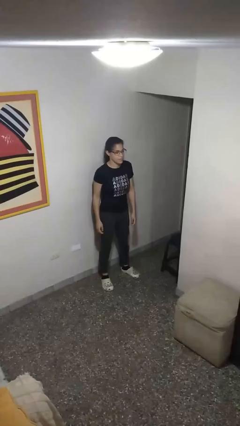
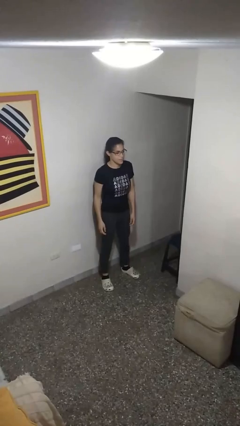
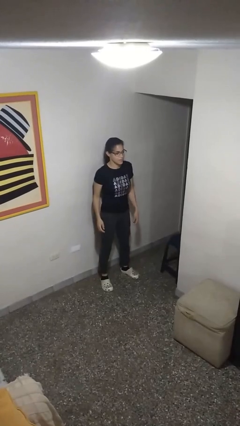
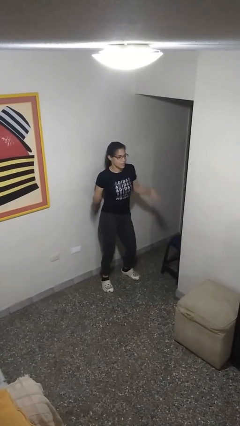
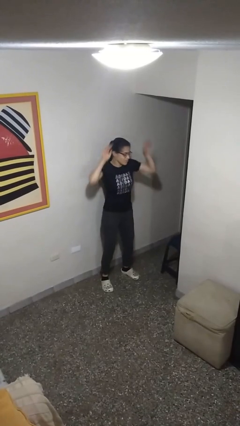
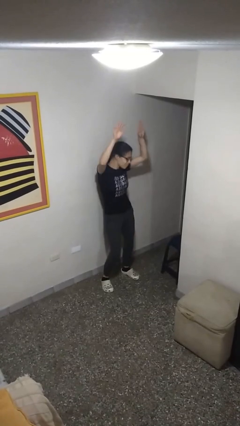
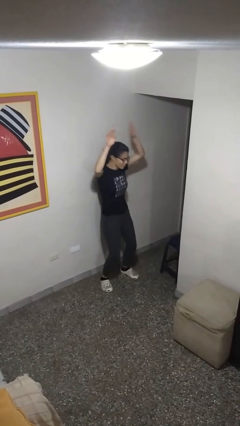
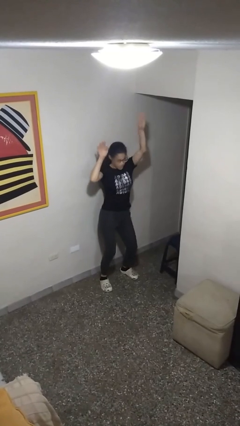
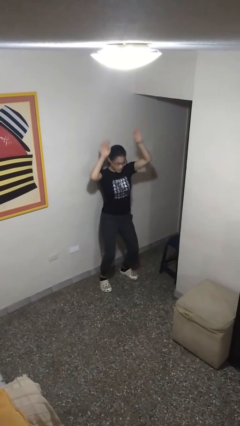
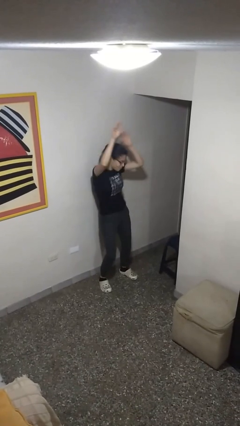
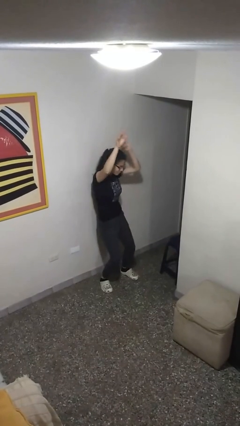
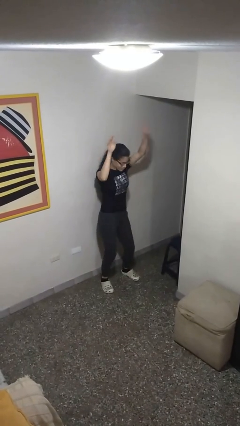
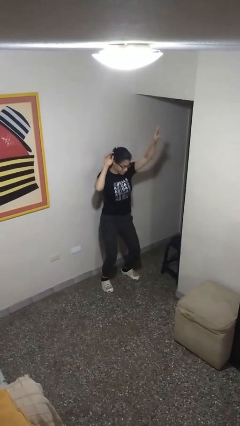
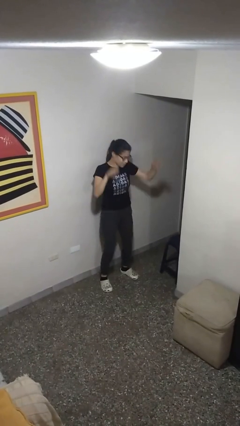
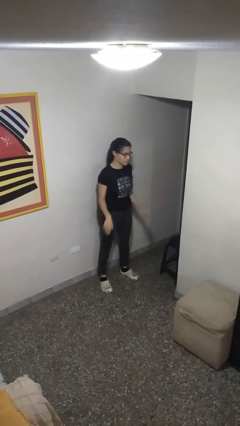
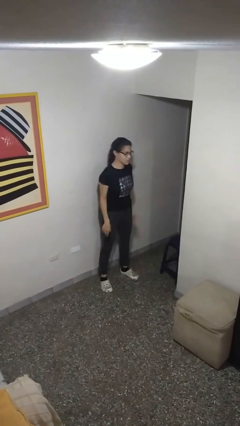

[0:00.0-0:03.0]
person dances in place

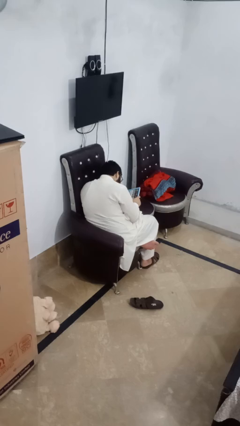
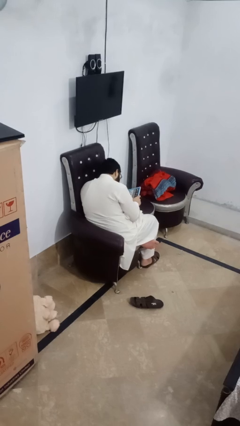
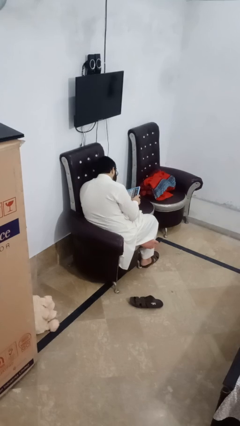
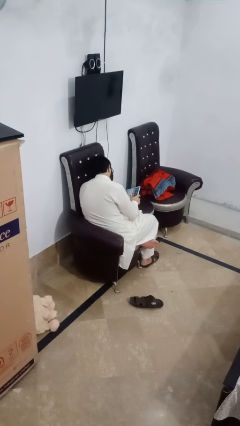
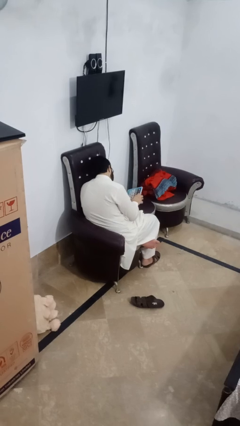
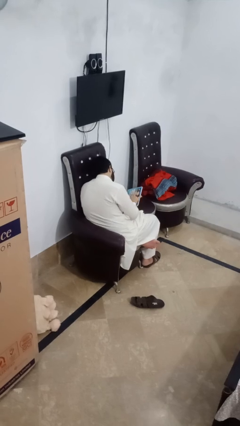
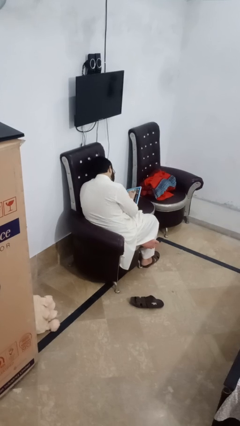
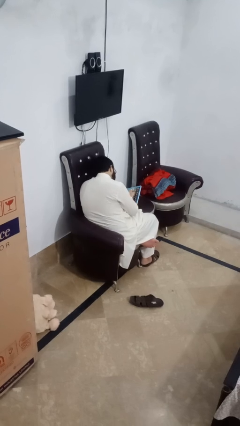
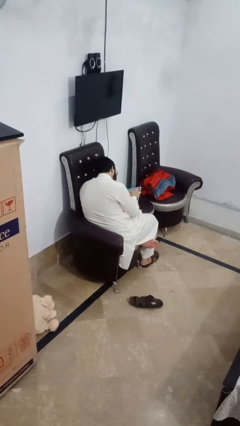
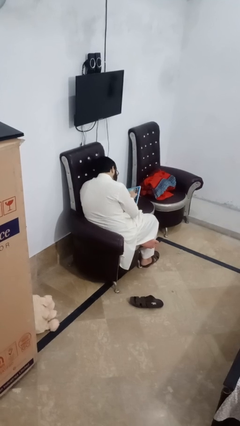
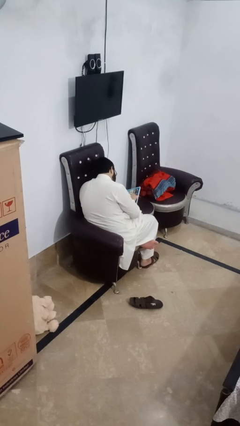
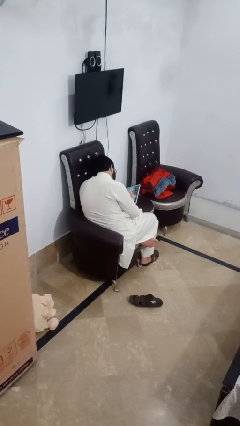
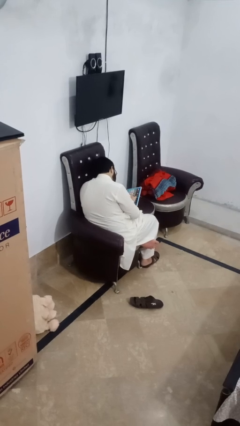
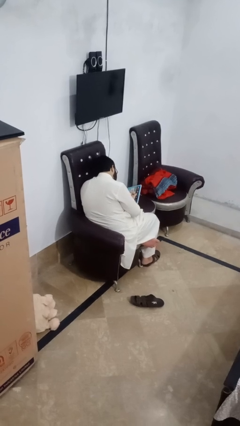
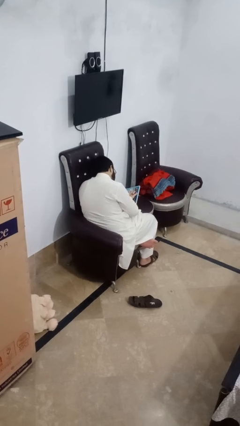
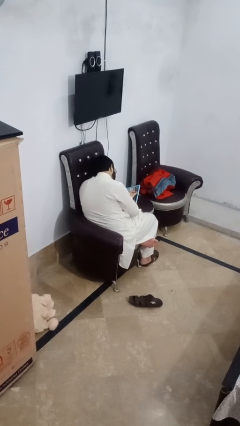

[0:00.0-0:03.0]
person interacts with tablet

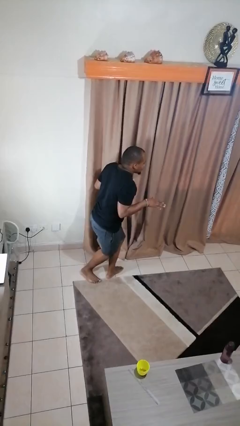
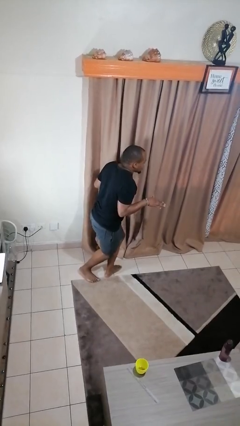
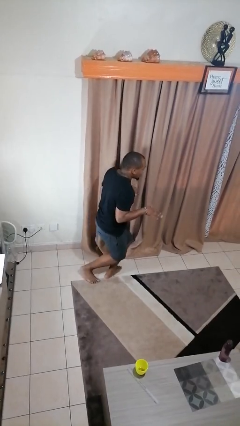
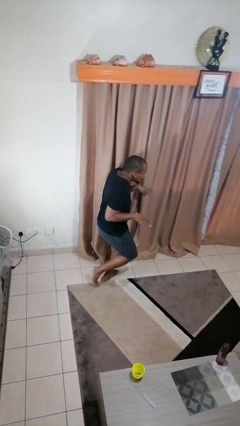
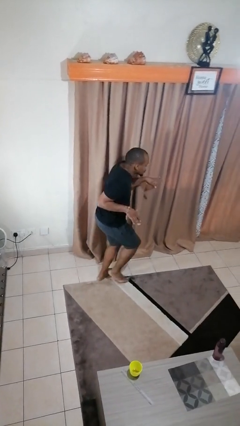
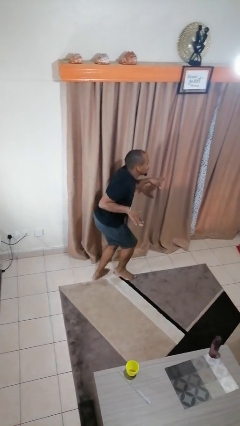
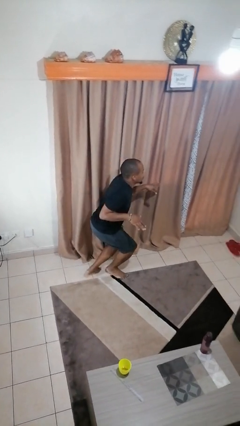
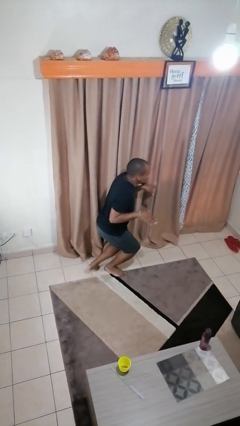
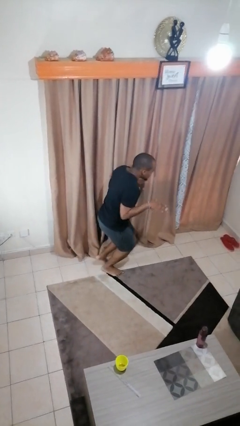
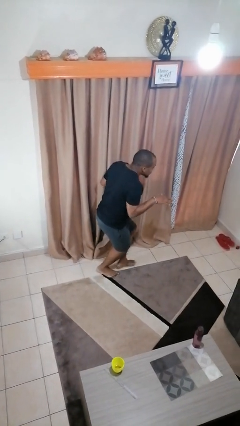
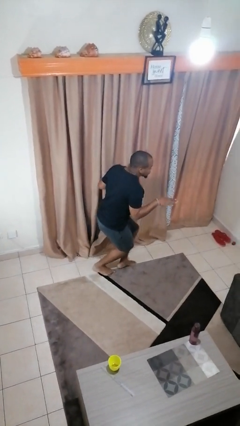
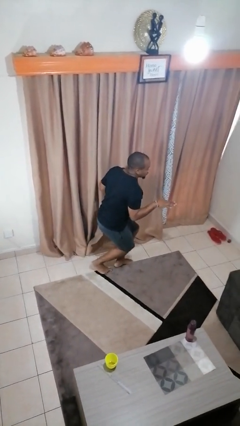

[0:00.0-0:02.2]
person picks up object from floor

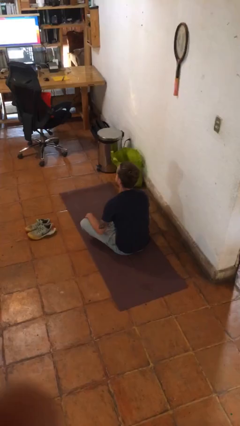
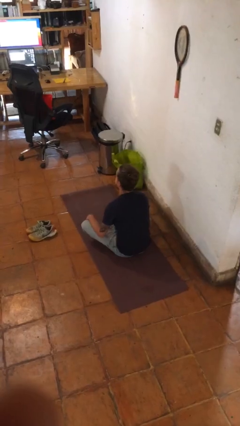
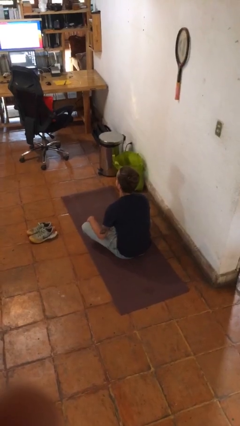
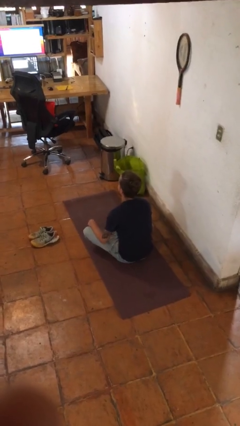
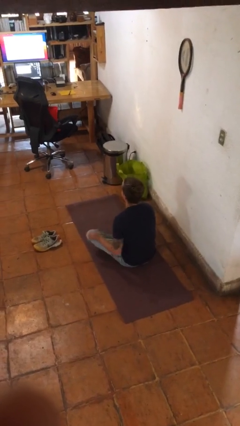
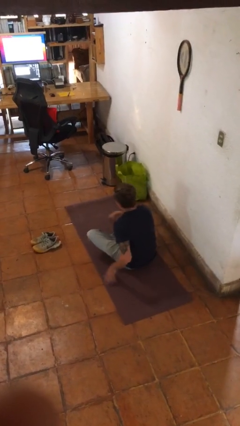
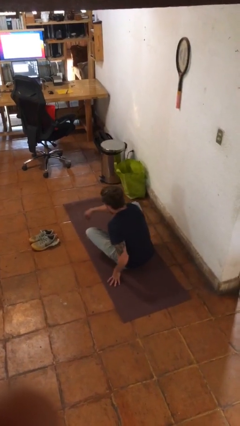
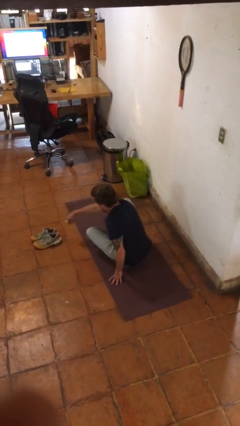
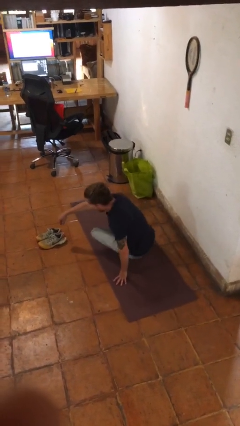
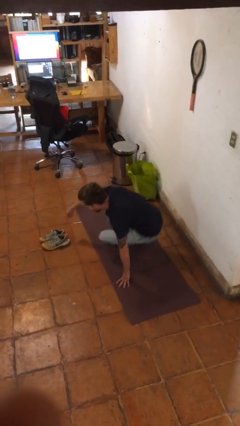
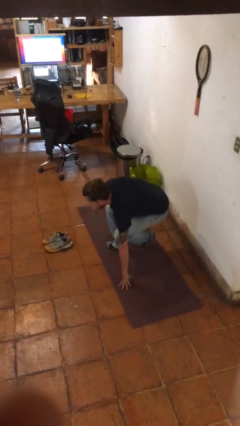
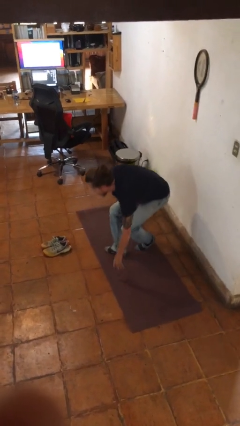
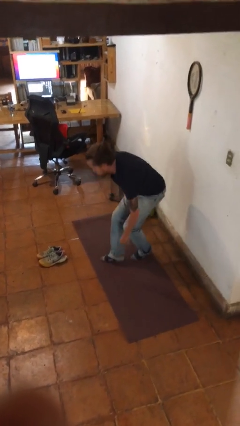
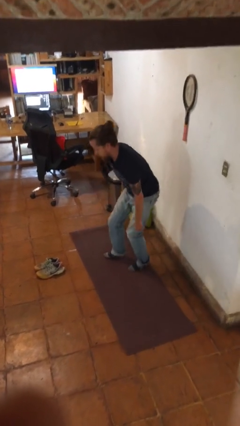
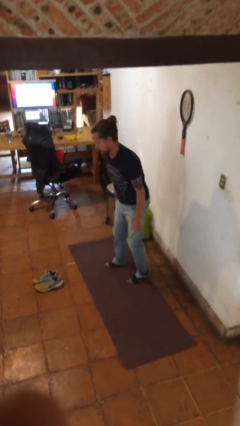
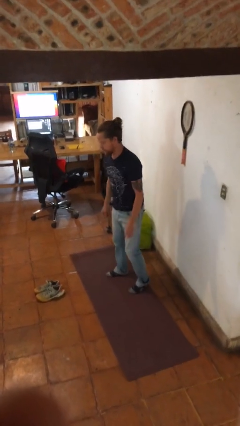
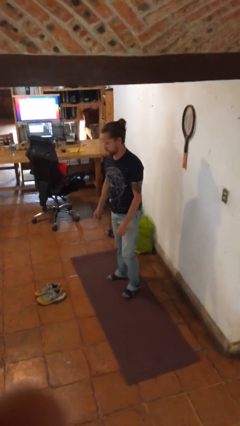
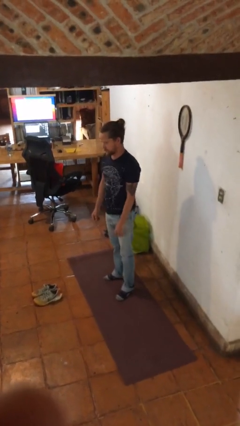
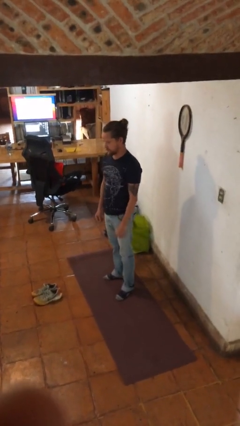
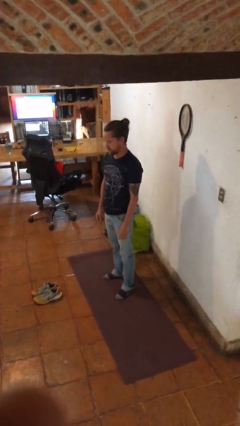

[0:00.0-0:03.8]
person stands up from floor

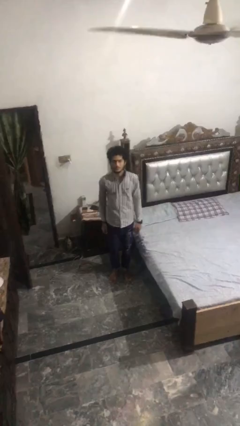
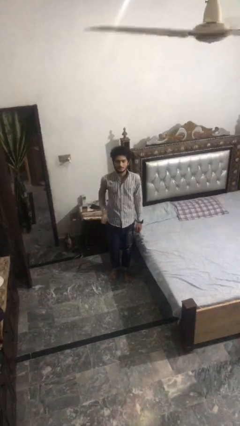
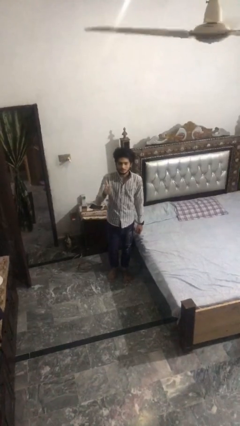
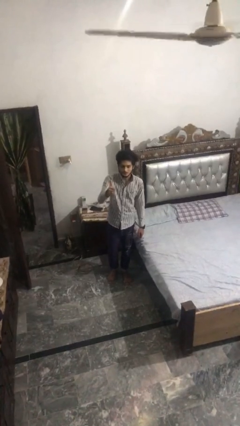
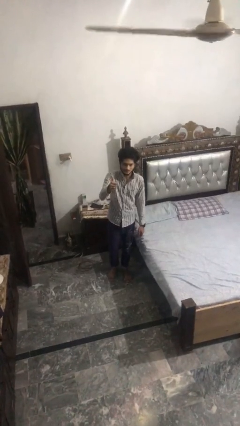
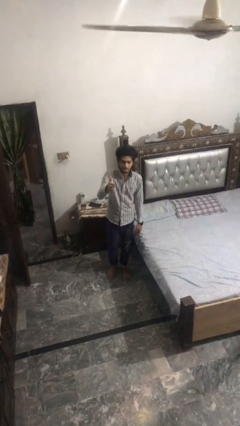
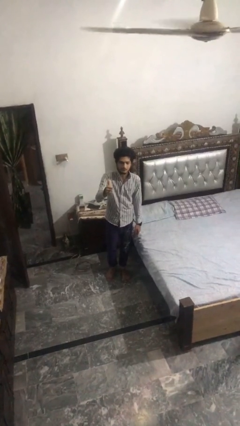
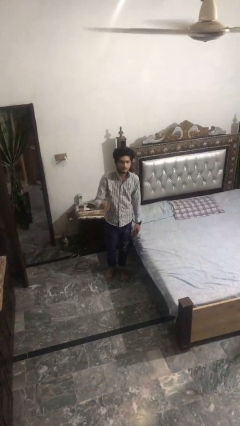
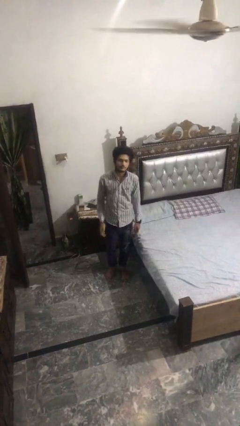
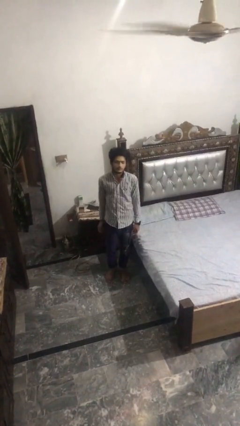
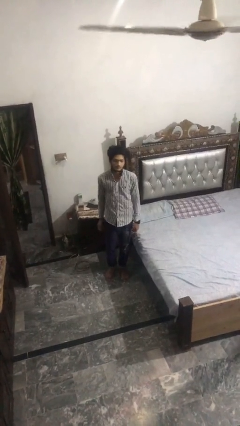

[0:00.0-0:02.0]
person gestures thumbs up

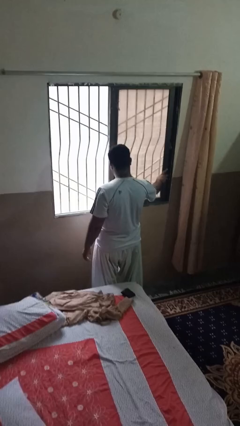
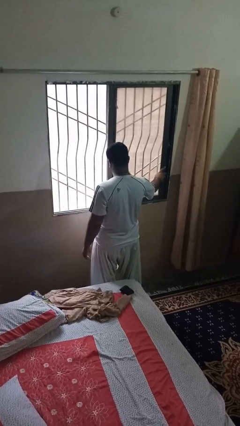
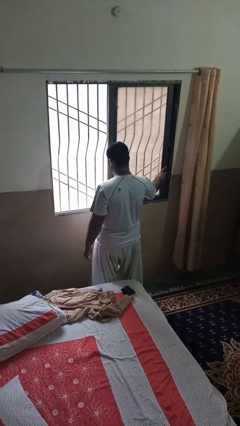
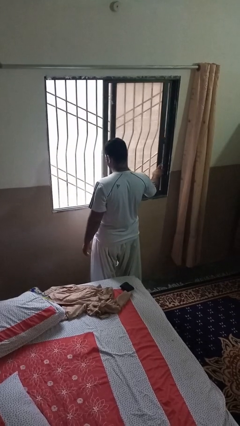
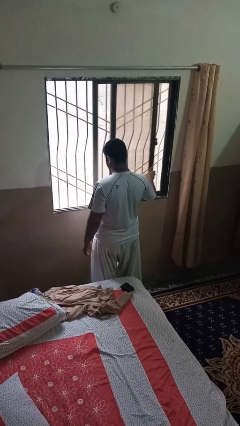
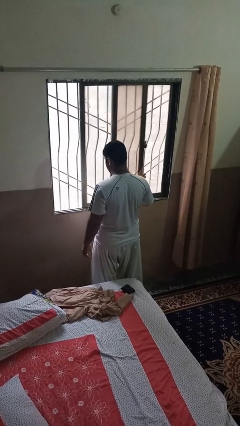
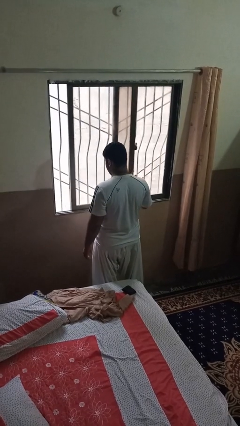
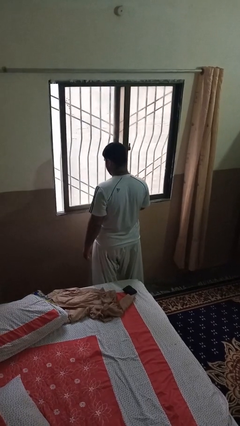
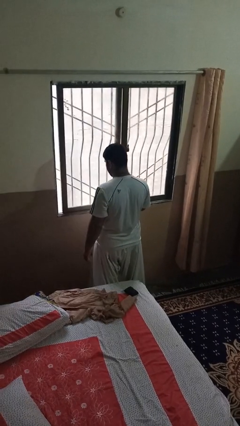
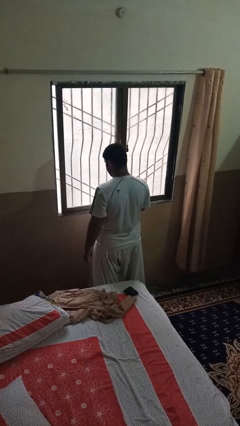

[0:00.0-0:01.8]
person closes home window

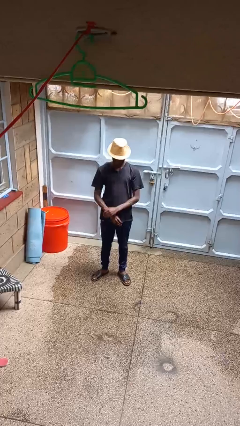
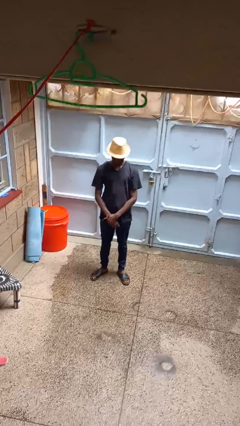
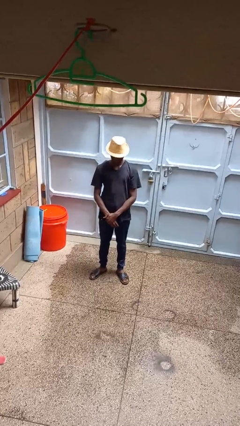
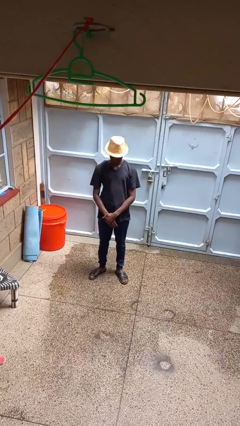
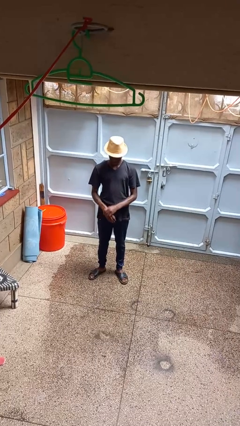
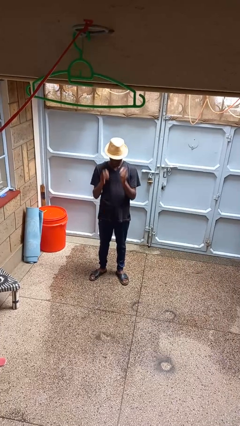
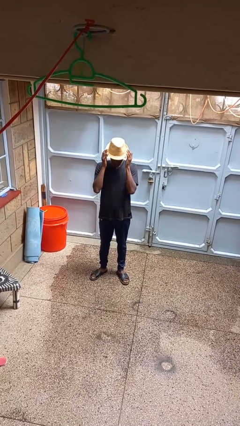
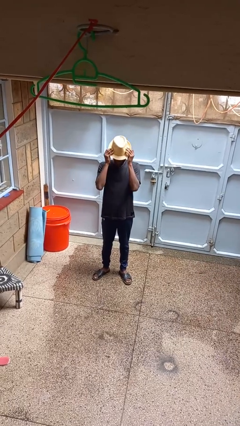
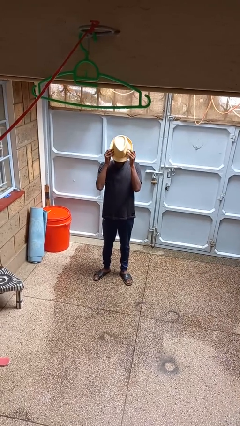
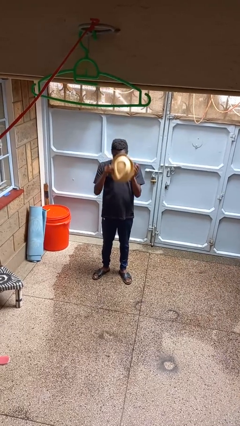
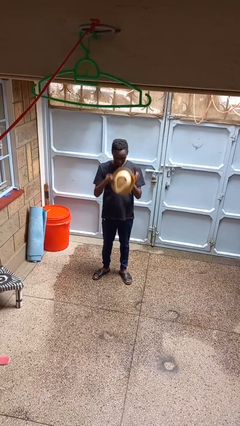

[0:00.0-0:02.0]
person takes off hat
